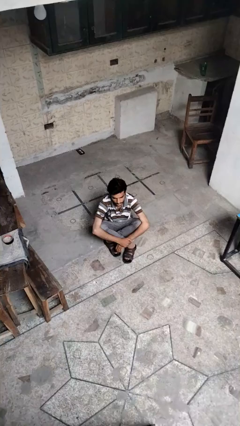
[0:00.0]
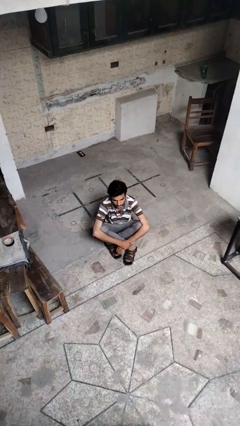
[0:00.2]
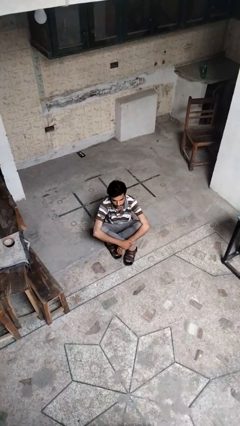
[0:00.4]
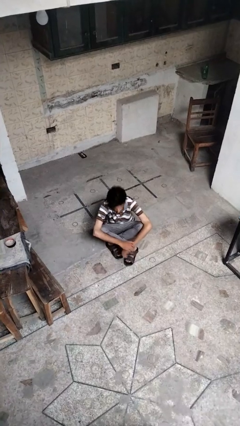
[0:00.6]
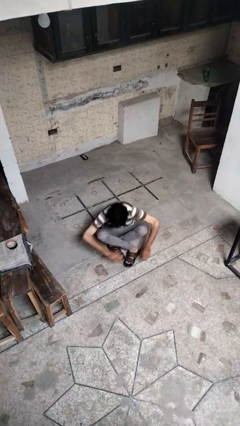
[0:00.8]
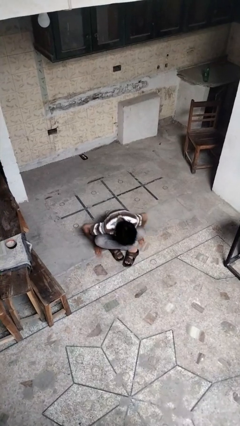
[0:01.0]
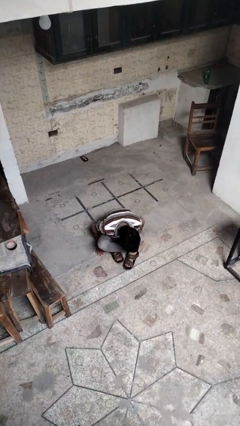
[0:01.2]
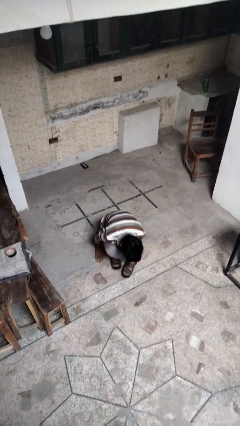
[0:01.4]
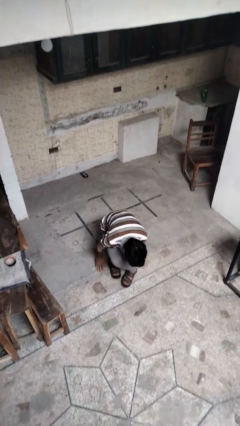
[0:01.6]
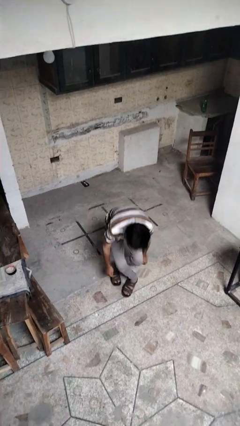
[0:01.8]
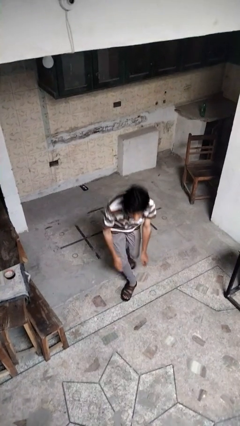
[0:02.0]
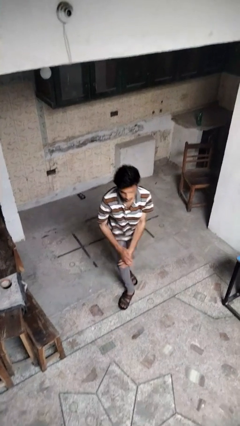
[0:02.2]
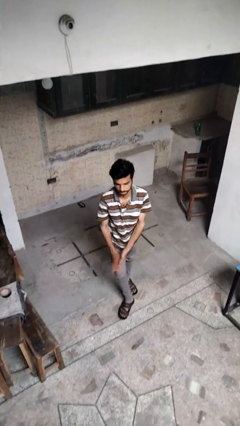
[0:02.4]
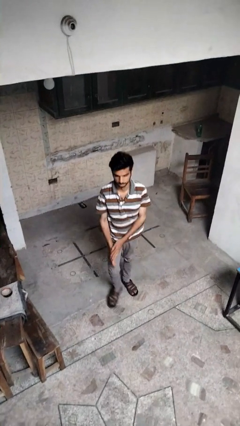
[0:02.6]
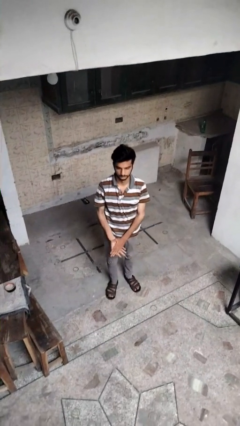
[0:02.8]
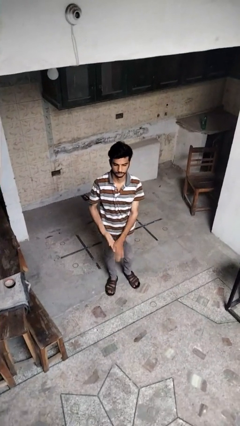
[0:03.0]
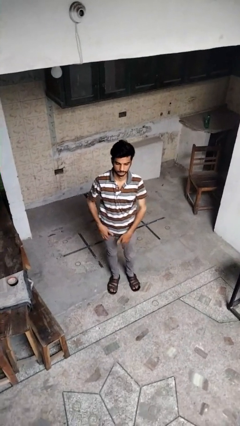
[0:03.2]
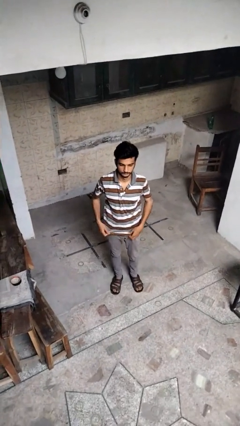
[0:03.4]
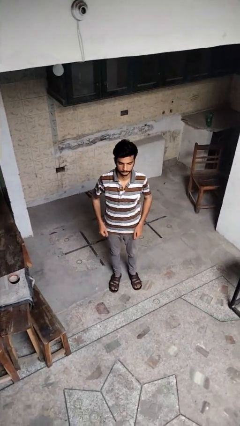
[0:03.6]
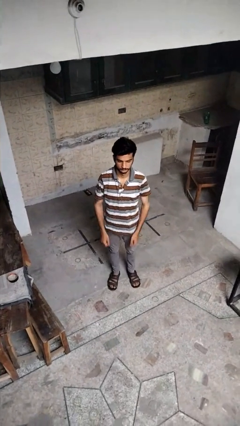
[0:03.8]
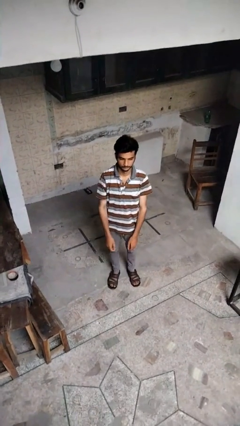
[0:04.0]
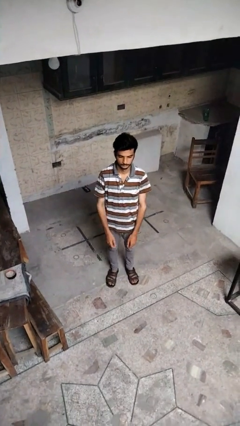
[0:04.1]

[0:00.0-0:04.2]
person stands up from floor

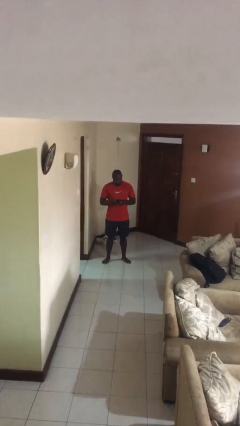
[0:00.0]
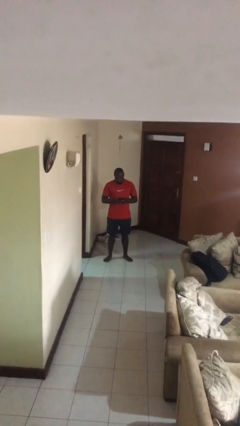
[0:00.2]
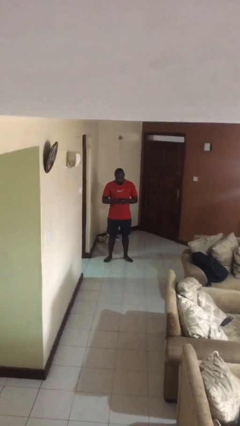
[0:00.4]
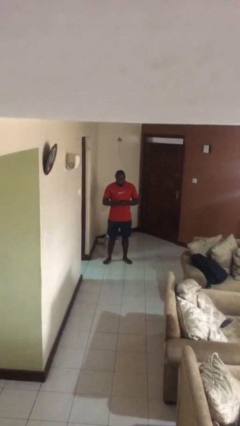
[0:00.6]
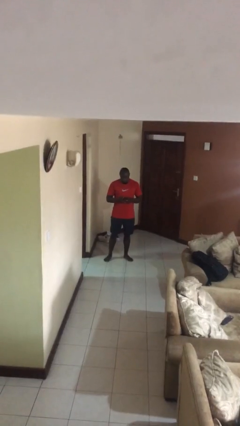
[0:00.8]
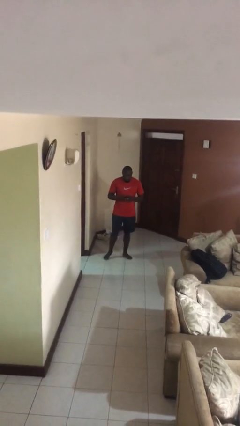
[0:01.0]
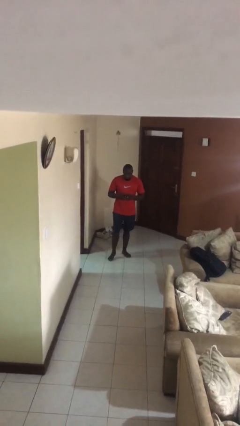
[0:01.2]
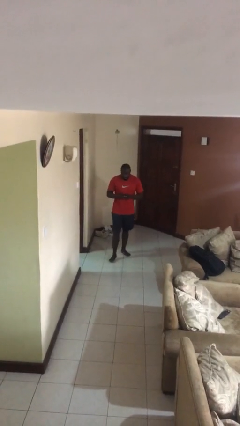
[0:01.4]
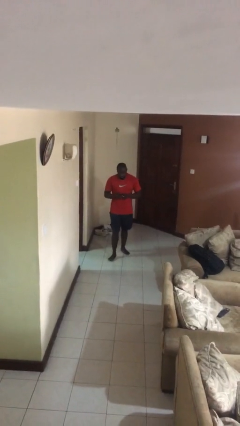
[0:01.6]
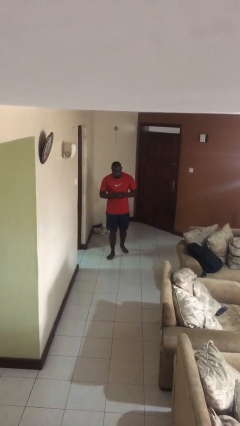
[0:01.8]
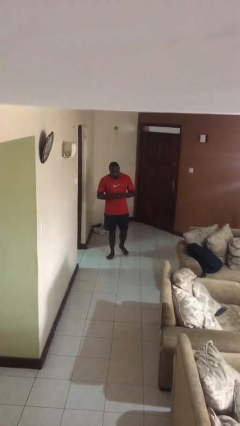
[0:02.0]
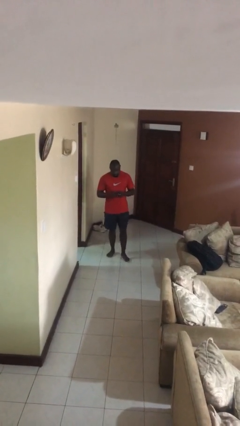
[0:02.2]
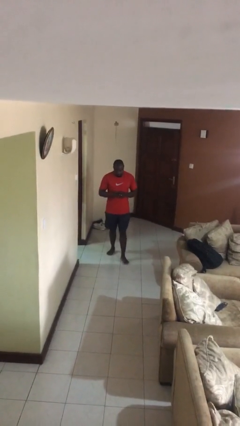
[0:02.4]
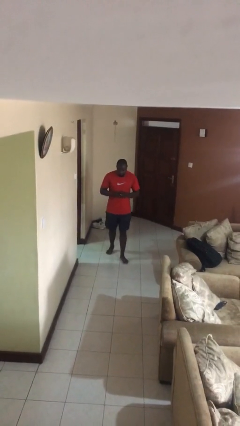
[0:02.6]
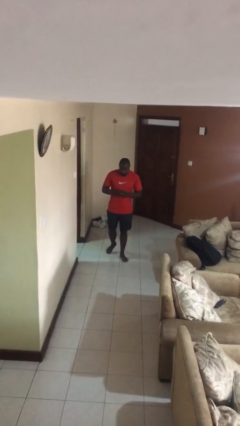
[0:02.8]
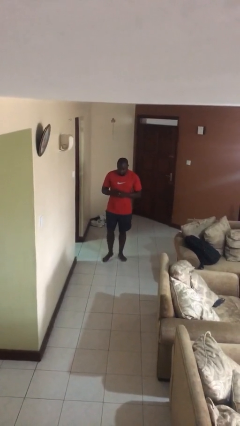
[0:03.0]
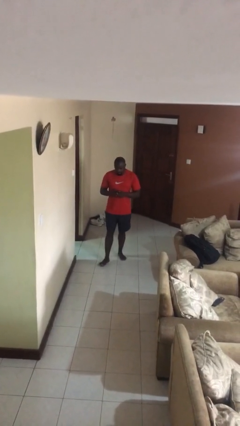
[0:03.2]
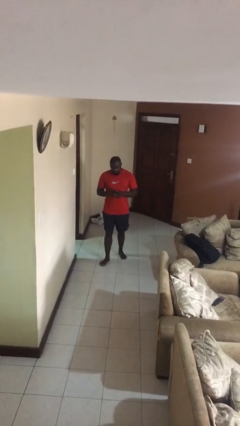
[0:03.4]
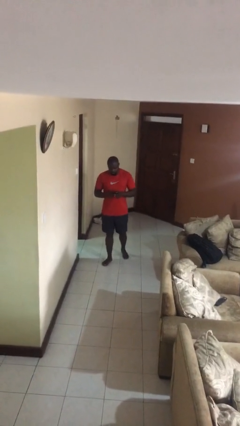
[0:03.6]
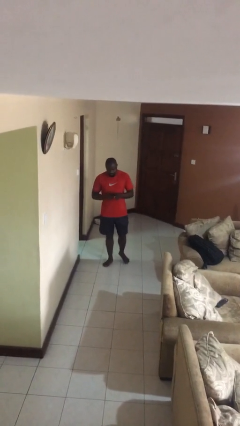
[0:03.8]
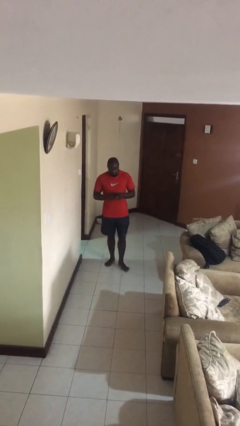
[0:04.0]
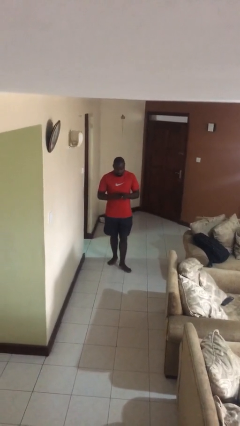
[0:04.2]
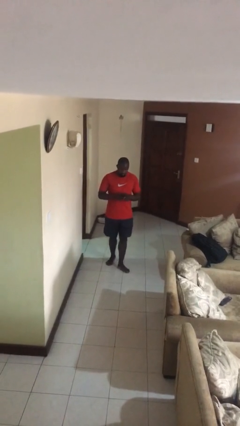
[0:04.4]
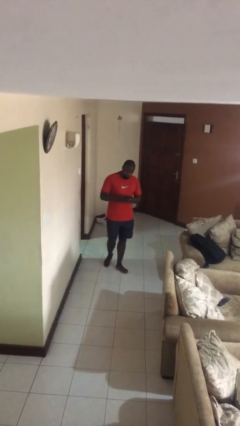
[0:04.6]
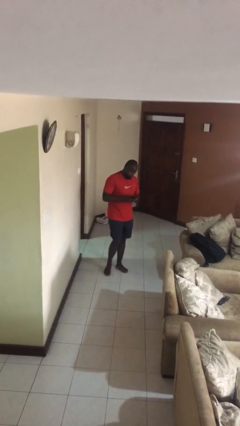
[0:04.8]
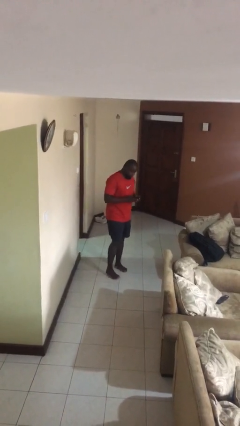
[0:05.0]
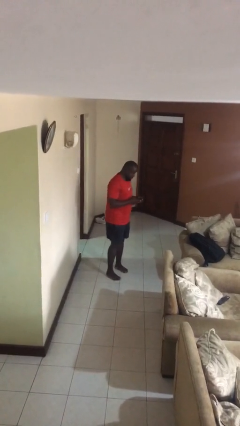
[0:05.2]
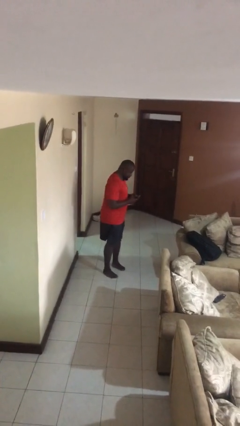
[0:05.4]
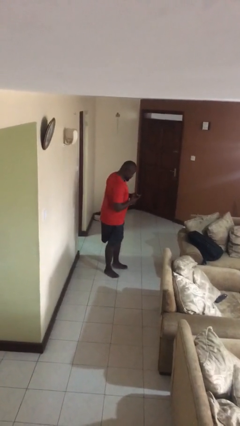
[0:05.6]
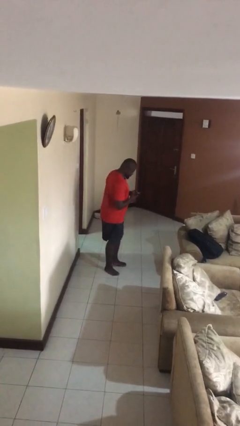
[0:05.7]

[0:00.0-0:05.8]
person texts on phone

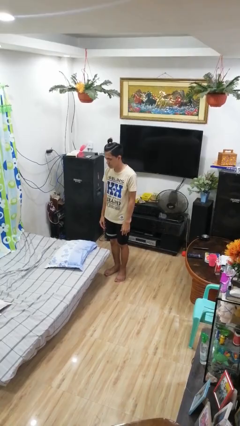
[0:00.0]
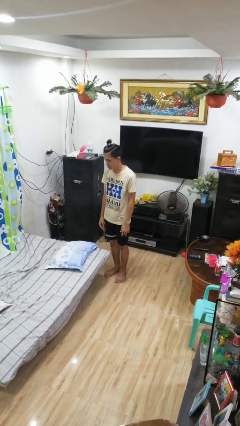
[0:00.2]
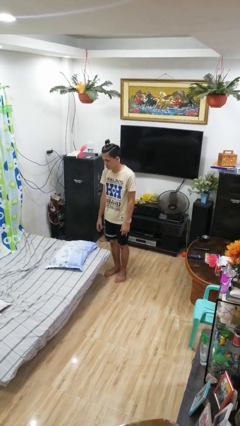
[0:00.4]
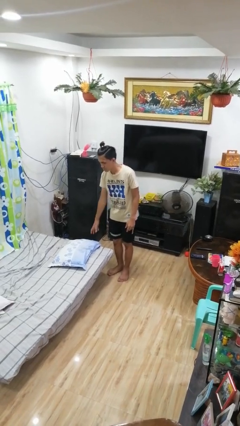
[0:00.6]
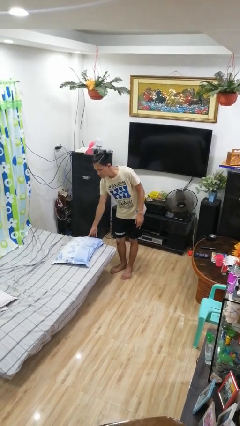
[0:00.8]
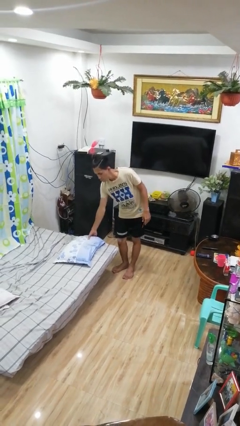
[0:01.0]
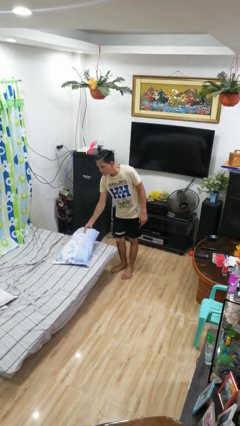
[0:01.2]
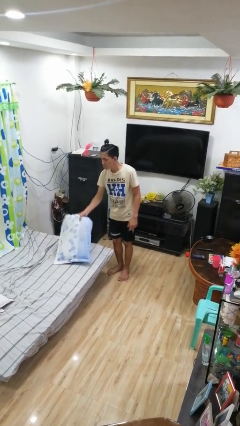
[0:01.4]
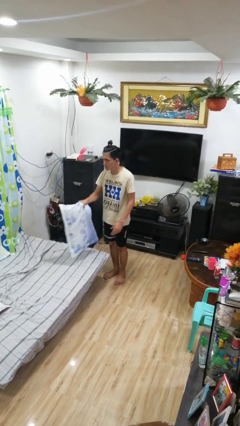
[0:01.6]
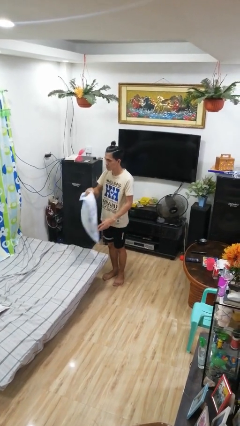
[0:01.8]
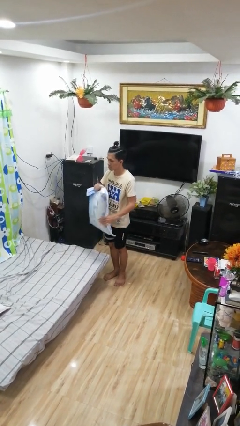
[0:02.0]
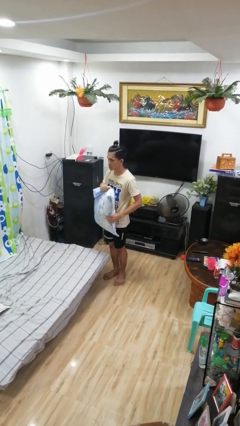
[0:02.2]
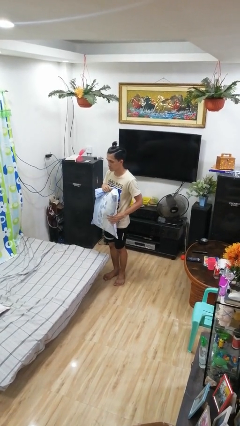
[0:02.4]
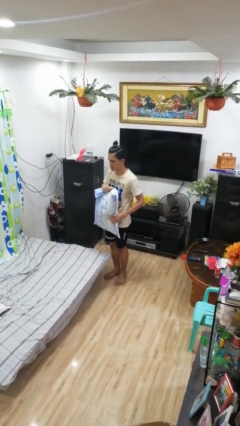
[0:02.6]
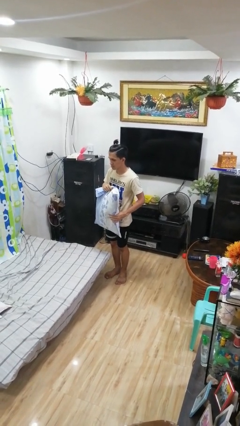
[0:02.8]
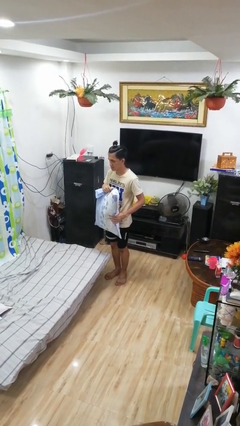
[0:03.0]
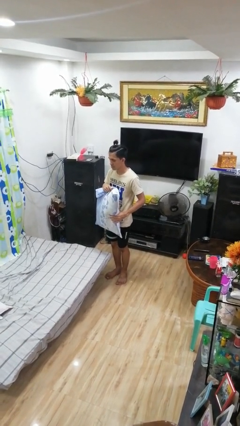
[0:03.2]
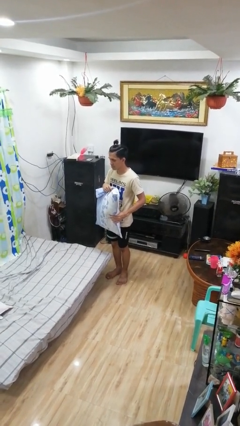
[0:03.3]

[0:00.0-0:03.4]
person picks up object from bed

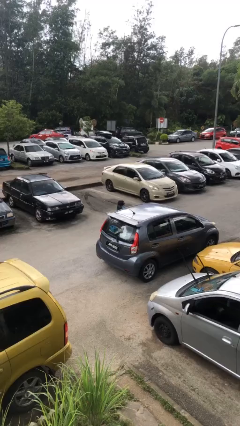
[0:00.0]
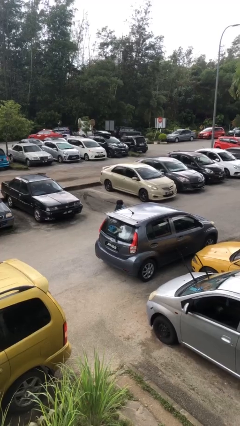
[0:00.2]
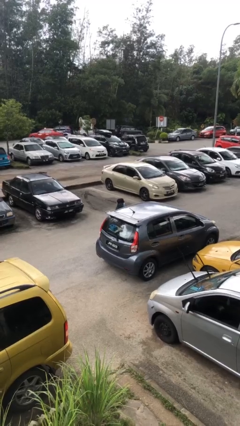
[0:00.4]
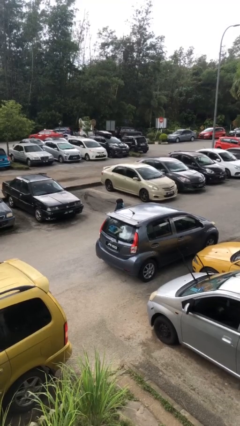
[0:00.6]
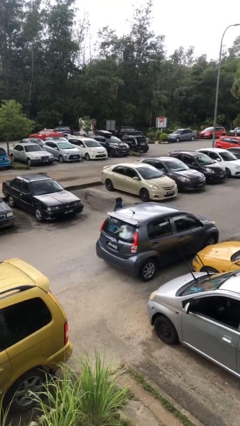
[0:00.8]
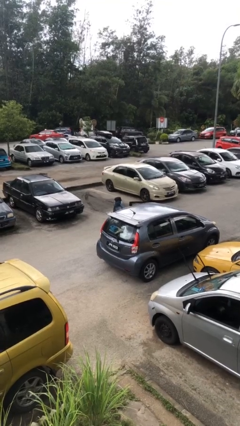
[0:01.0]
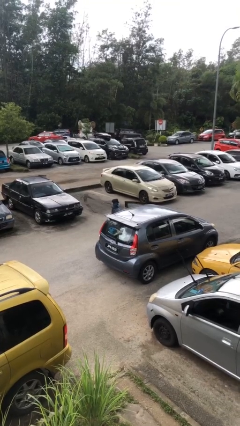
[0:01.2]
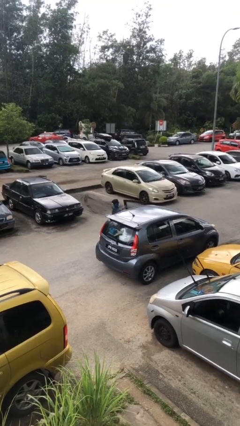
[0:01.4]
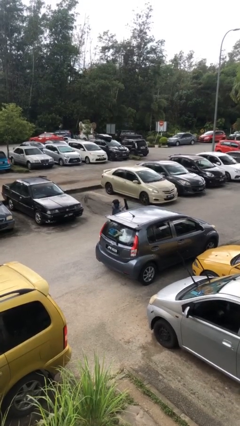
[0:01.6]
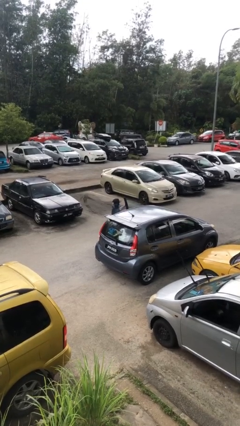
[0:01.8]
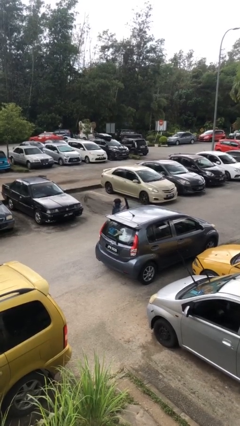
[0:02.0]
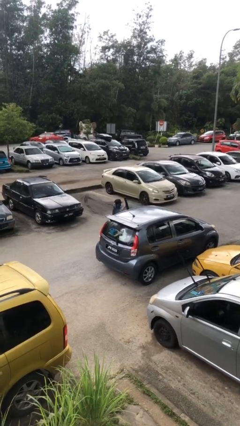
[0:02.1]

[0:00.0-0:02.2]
person opens car door

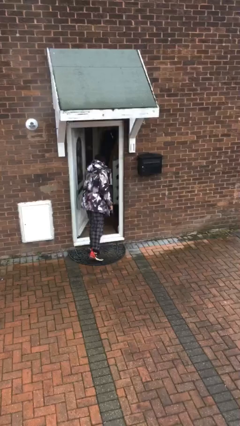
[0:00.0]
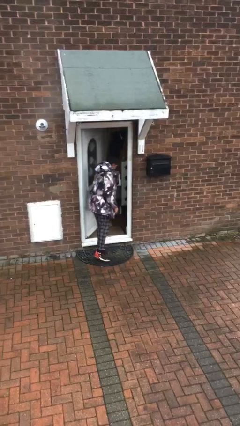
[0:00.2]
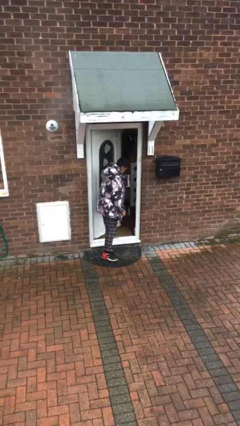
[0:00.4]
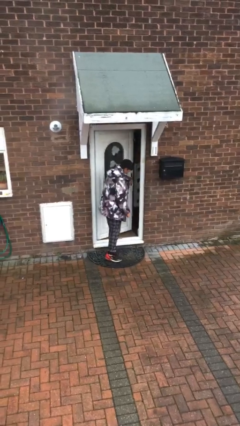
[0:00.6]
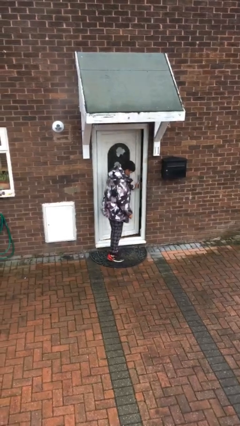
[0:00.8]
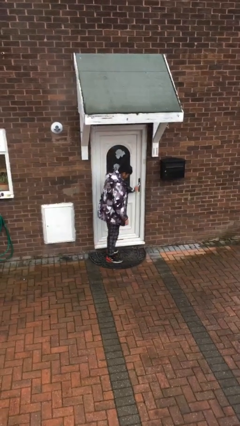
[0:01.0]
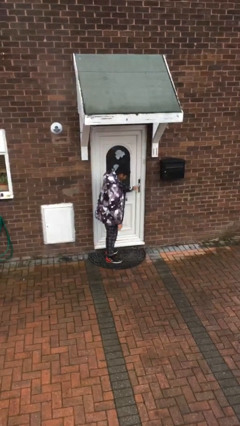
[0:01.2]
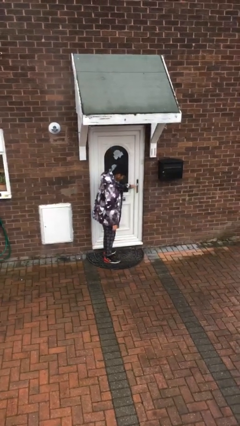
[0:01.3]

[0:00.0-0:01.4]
person closes facility door

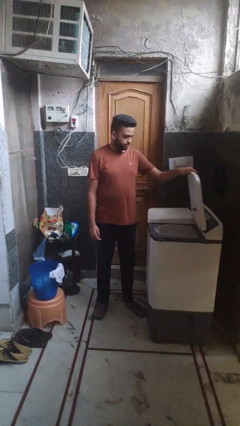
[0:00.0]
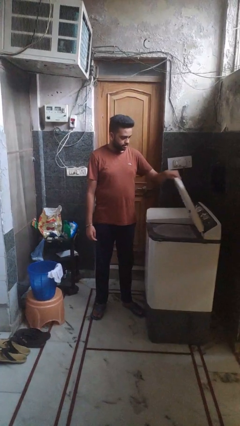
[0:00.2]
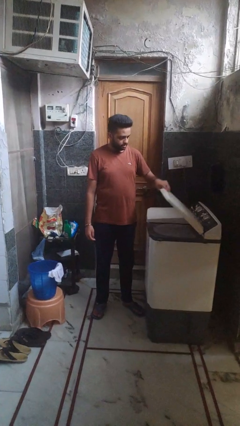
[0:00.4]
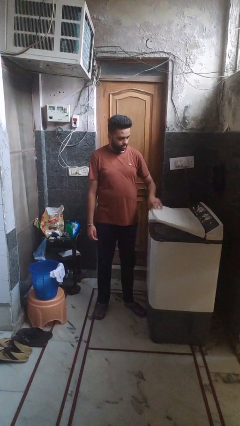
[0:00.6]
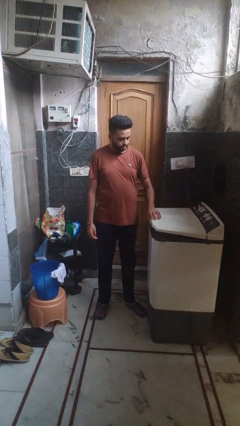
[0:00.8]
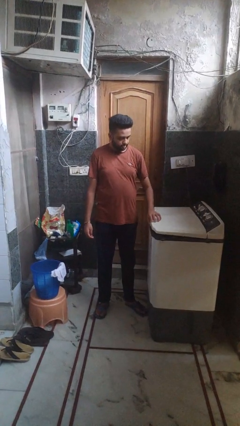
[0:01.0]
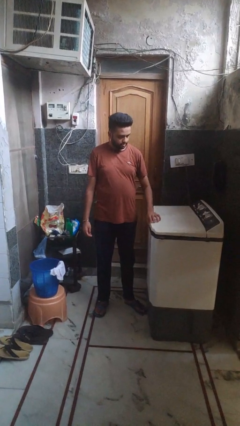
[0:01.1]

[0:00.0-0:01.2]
person closes clothes washer
